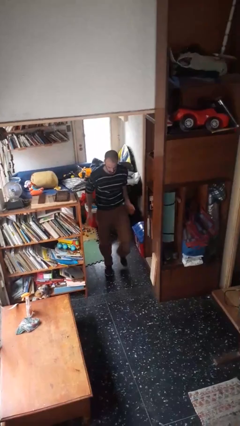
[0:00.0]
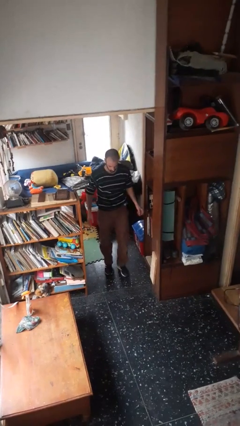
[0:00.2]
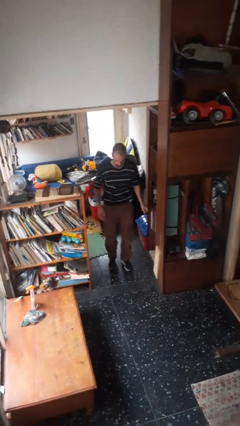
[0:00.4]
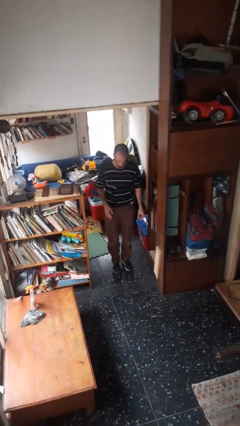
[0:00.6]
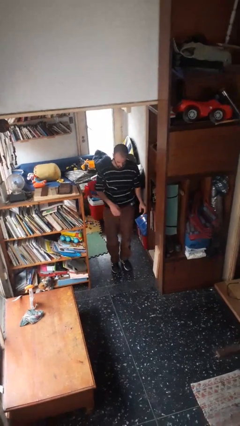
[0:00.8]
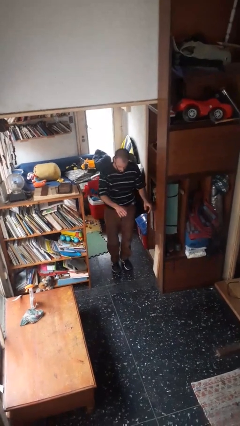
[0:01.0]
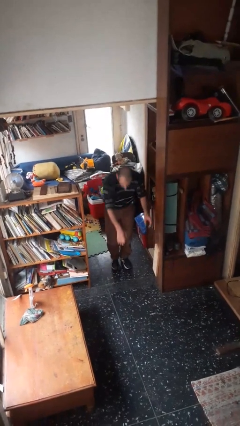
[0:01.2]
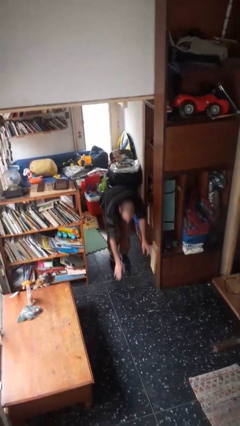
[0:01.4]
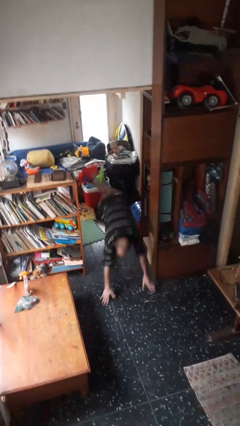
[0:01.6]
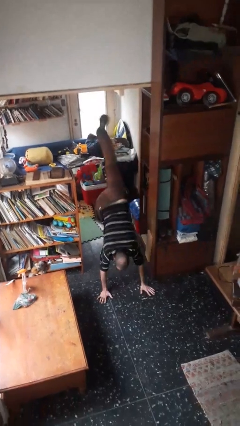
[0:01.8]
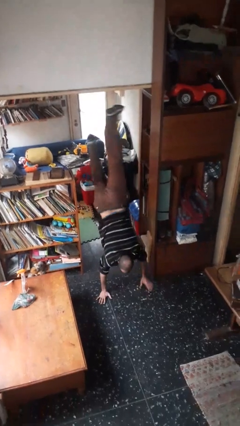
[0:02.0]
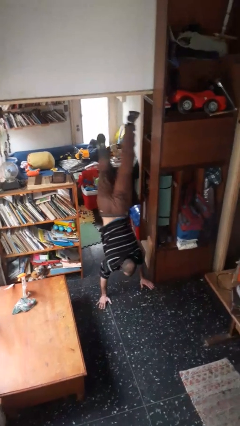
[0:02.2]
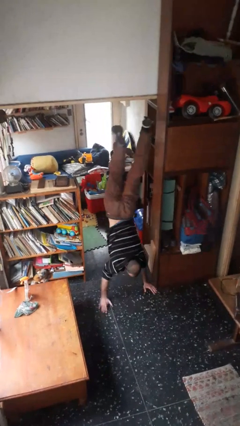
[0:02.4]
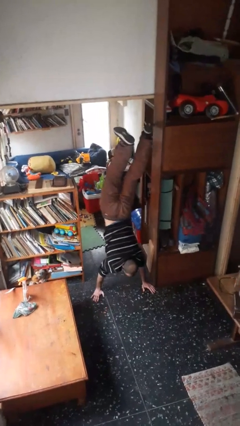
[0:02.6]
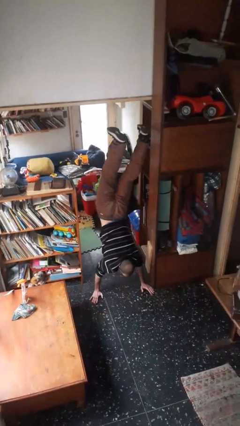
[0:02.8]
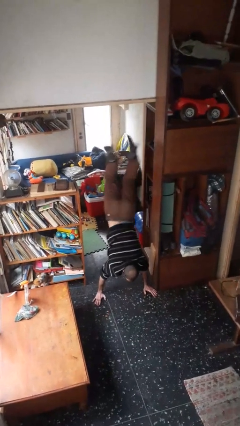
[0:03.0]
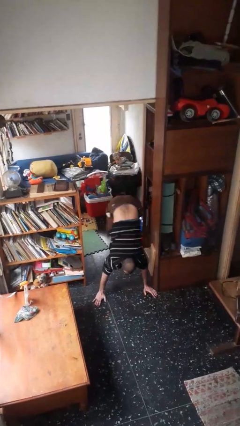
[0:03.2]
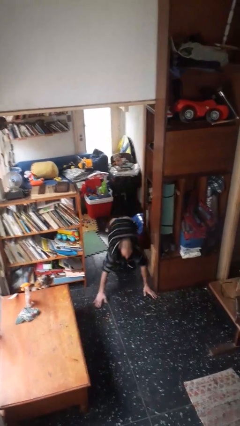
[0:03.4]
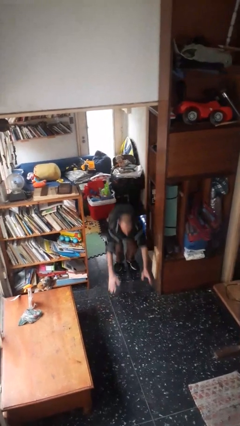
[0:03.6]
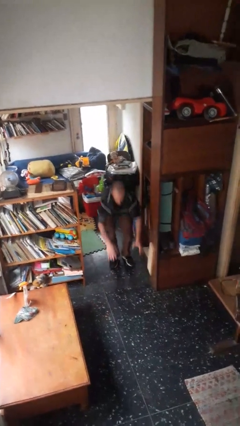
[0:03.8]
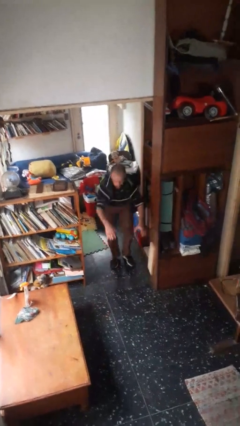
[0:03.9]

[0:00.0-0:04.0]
person handstand

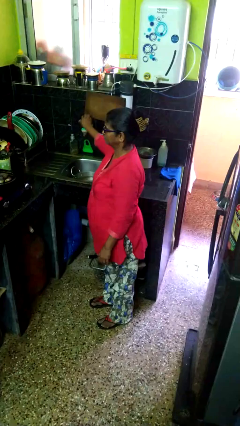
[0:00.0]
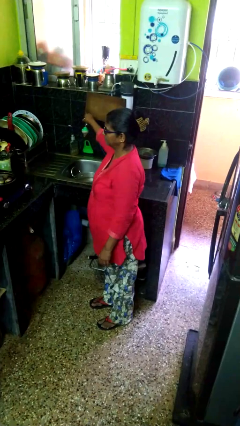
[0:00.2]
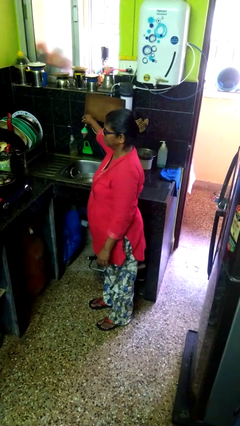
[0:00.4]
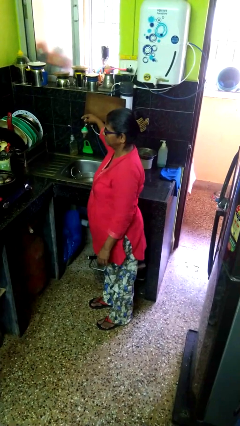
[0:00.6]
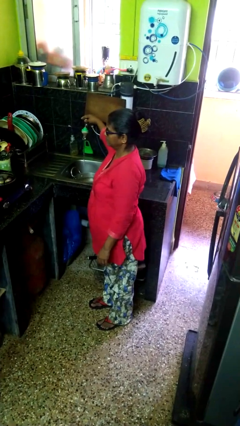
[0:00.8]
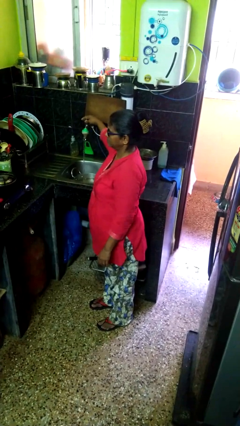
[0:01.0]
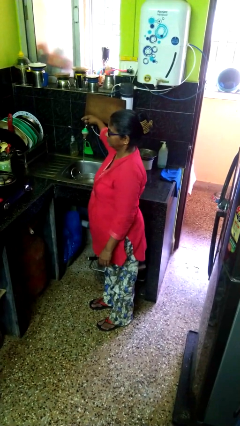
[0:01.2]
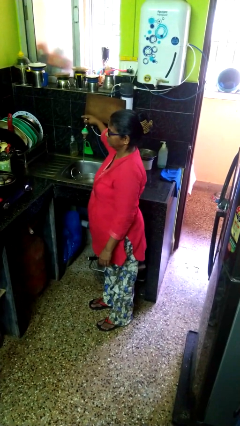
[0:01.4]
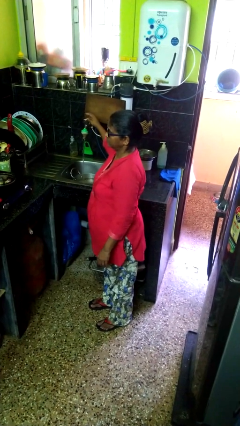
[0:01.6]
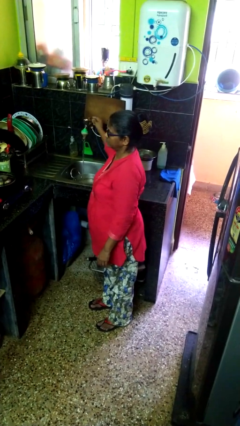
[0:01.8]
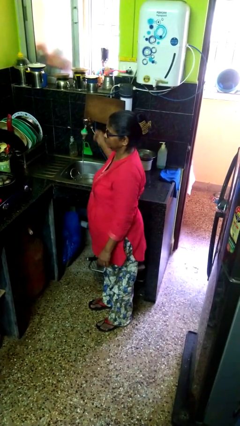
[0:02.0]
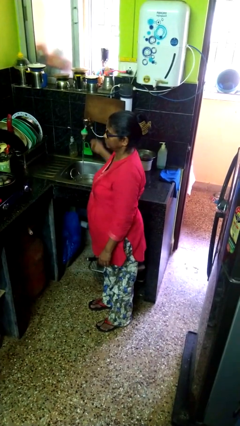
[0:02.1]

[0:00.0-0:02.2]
person turns on faucet

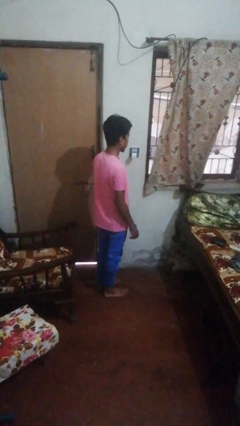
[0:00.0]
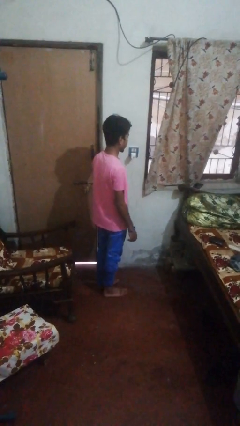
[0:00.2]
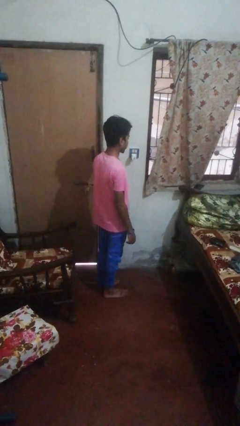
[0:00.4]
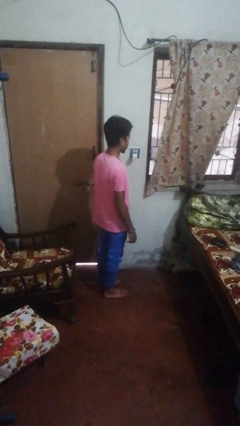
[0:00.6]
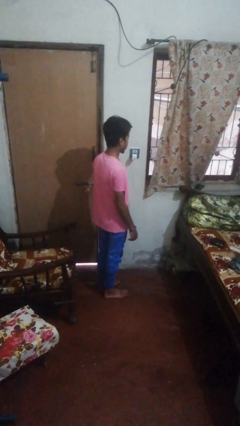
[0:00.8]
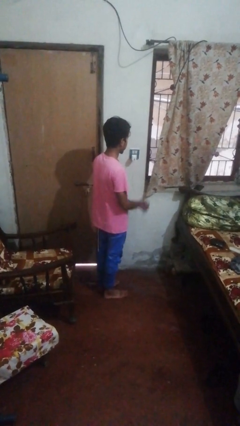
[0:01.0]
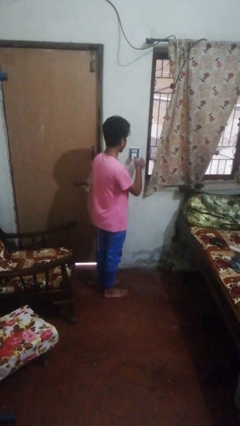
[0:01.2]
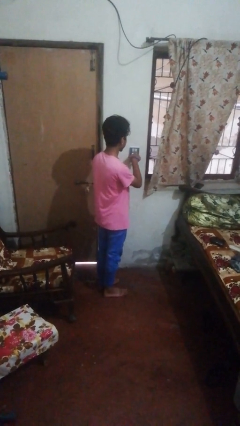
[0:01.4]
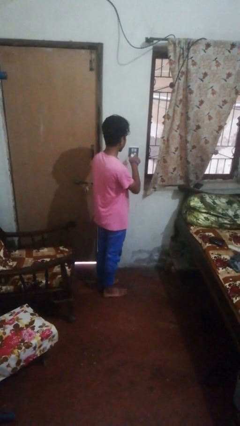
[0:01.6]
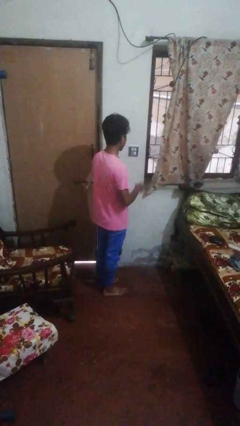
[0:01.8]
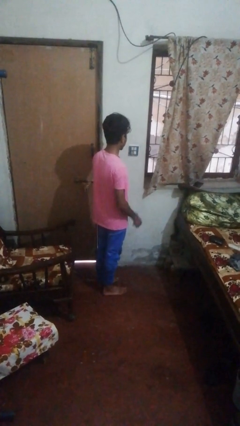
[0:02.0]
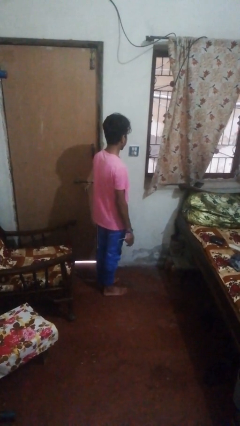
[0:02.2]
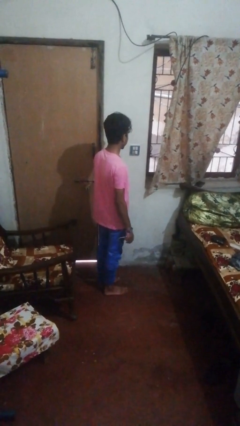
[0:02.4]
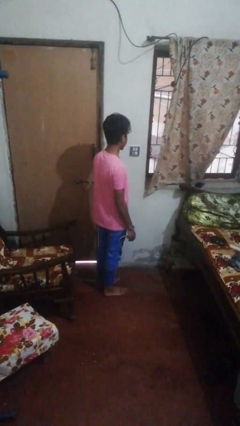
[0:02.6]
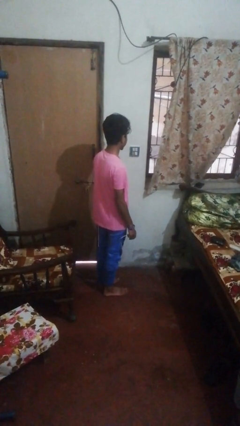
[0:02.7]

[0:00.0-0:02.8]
person unplugs from electrical socket

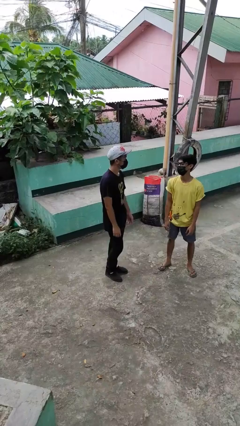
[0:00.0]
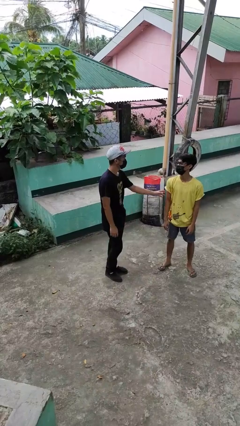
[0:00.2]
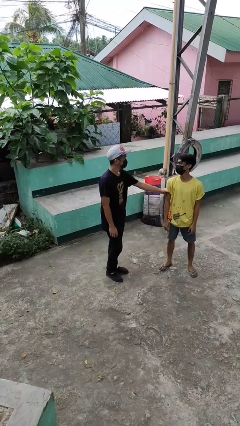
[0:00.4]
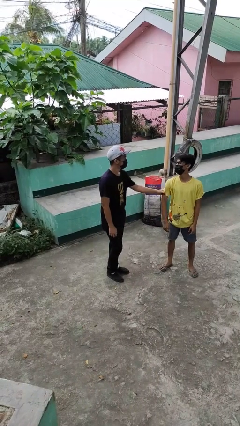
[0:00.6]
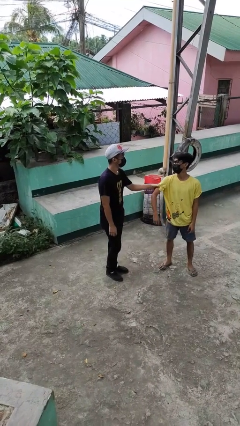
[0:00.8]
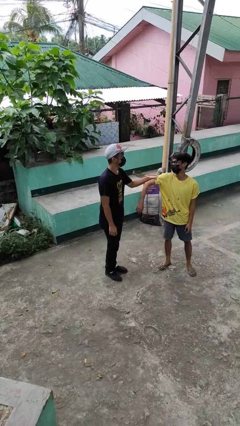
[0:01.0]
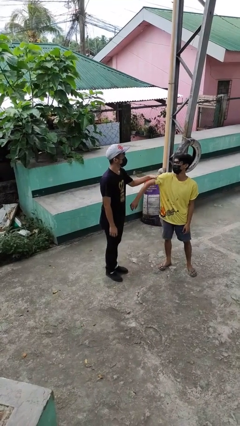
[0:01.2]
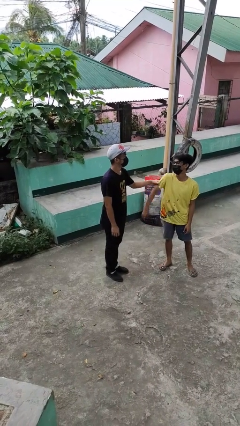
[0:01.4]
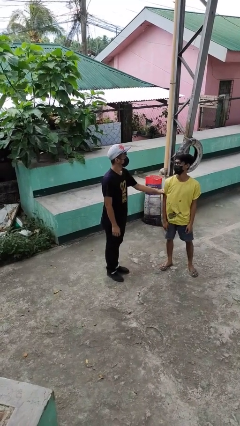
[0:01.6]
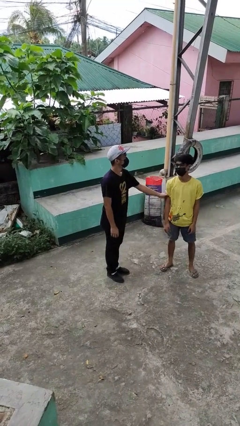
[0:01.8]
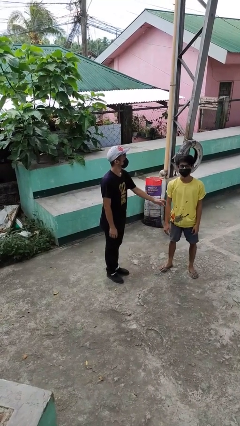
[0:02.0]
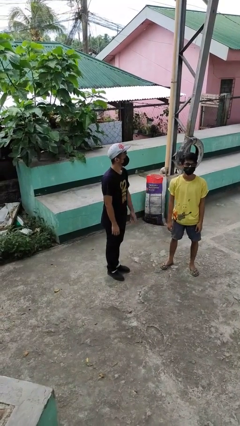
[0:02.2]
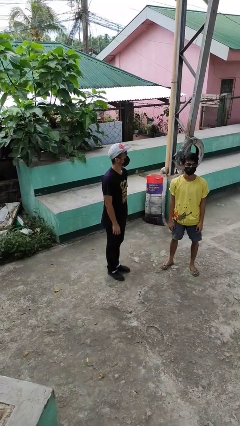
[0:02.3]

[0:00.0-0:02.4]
person grabs person by bicep

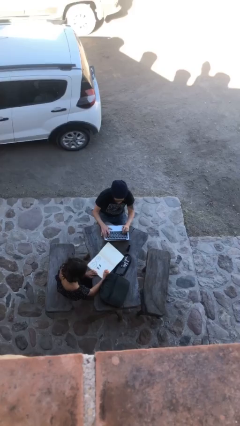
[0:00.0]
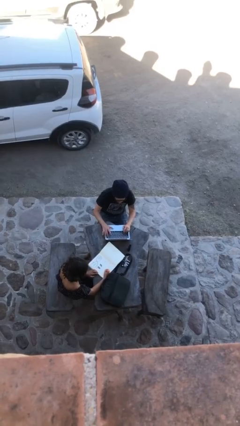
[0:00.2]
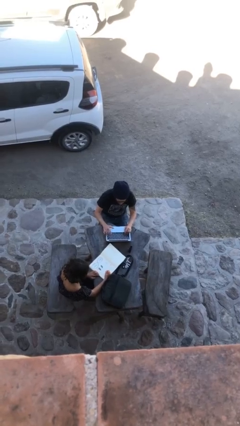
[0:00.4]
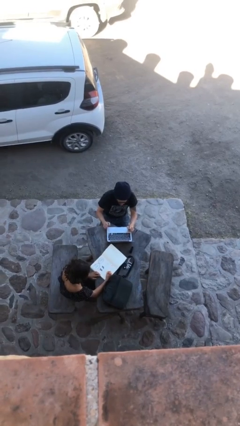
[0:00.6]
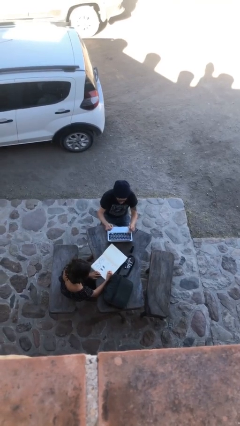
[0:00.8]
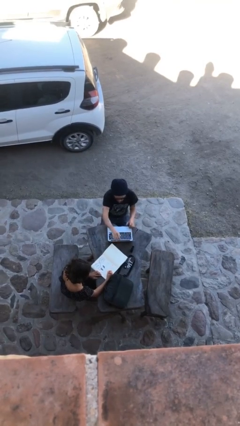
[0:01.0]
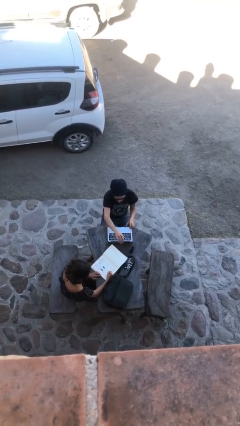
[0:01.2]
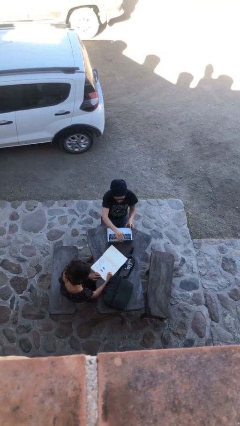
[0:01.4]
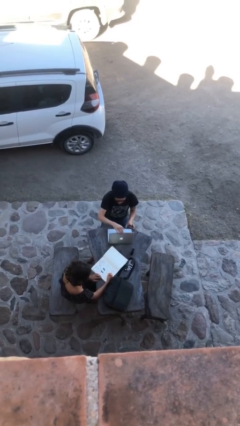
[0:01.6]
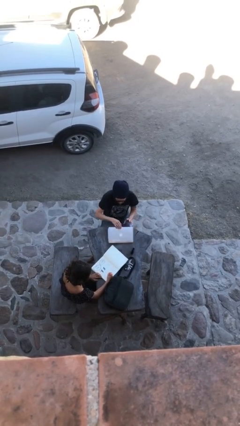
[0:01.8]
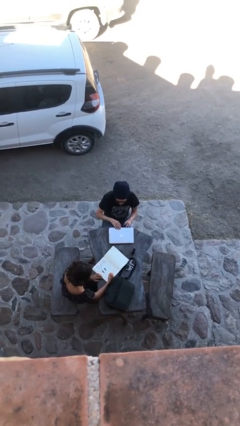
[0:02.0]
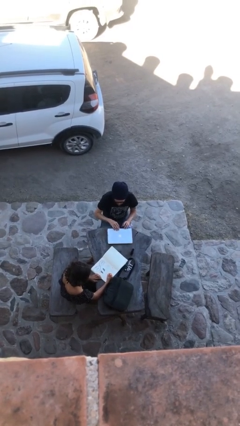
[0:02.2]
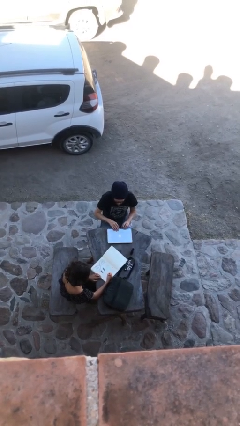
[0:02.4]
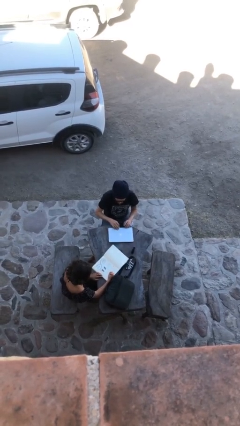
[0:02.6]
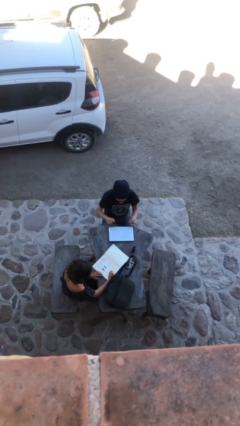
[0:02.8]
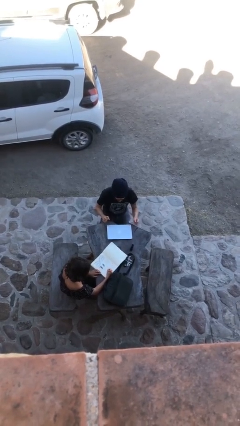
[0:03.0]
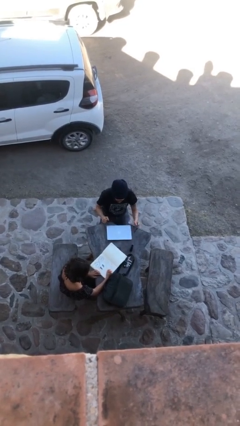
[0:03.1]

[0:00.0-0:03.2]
person interacts with laptop

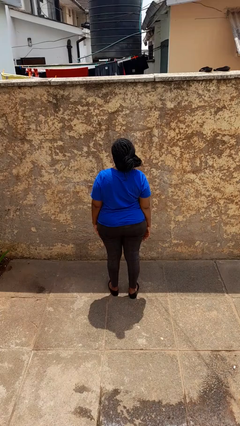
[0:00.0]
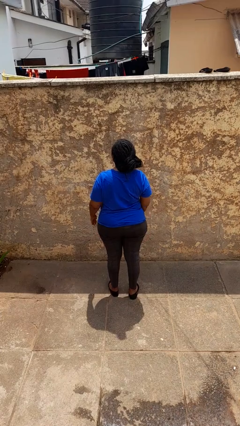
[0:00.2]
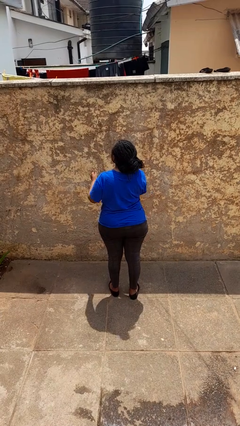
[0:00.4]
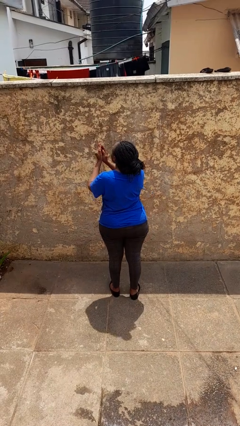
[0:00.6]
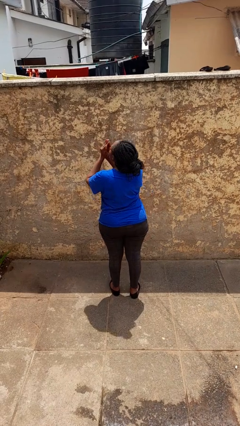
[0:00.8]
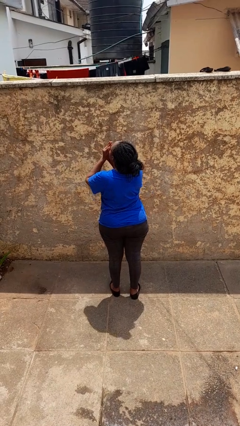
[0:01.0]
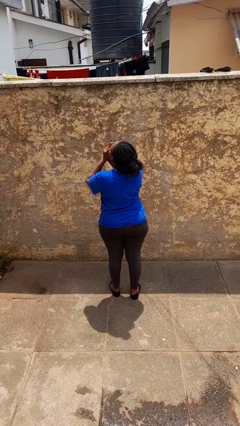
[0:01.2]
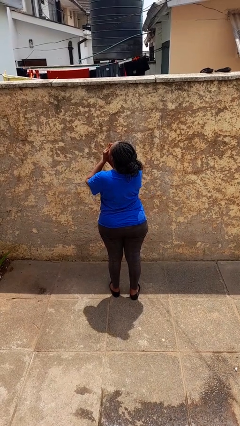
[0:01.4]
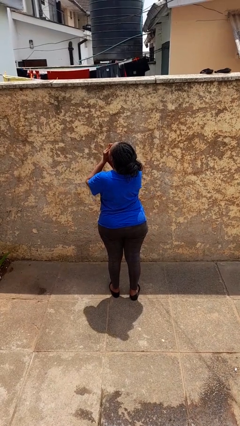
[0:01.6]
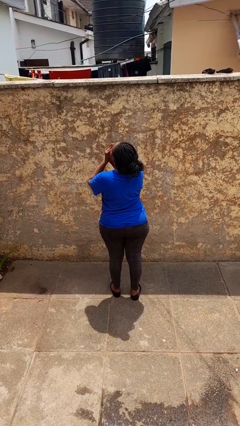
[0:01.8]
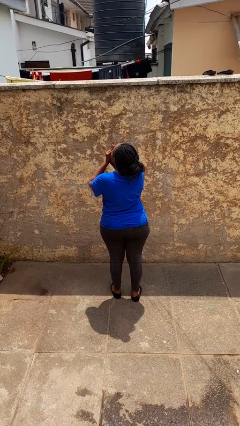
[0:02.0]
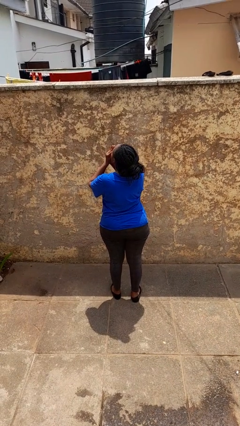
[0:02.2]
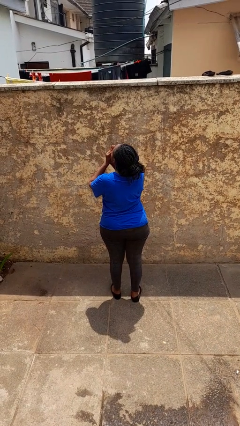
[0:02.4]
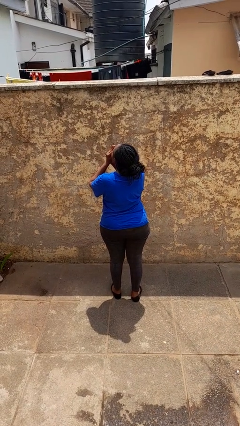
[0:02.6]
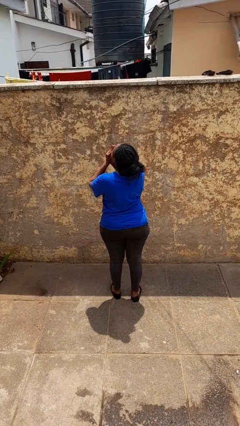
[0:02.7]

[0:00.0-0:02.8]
person blows into hands
